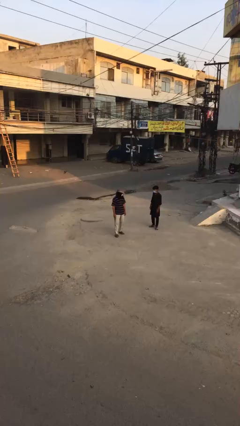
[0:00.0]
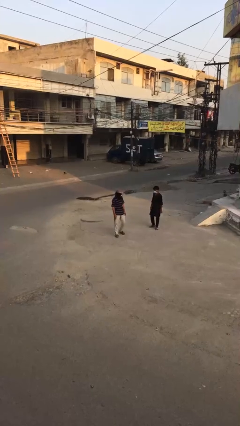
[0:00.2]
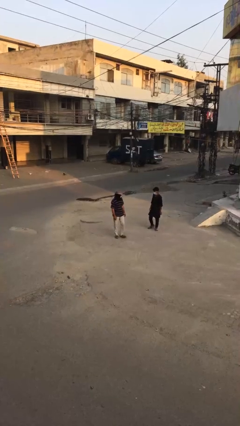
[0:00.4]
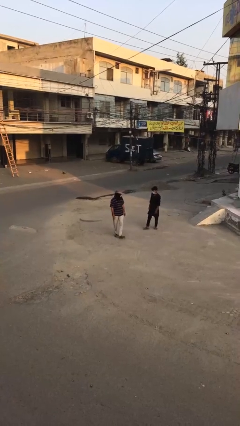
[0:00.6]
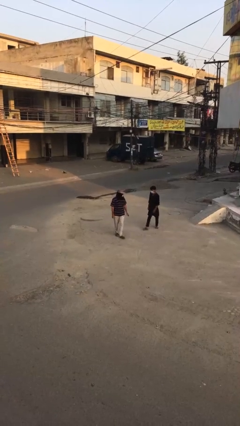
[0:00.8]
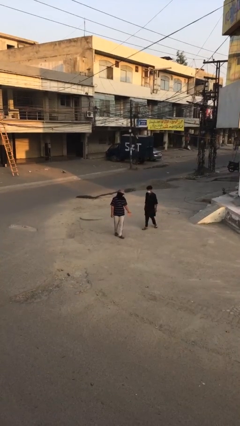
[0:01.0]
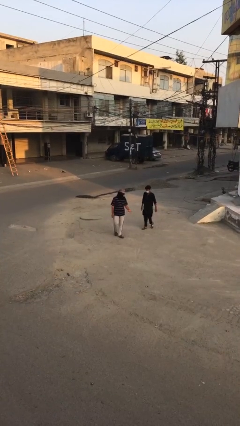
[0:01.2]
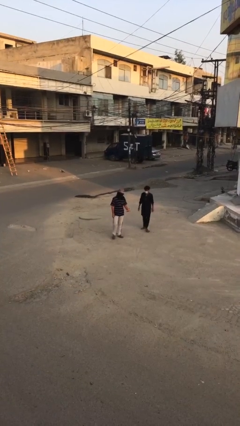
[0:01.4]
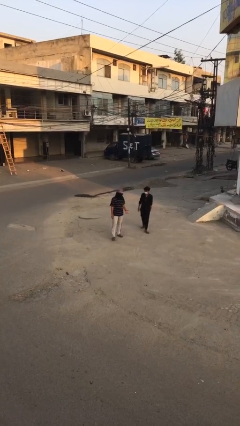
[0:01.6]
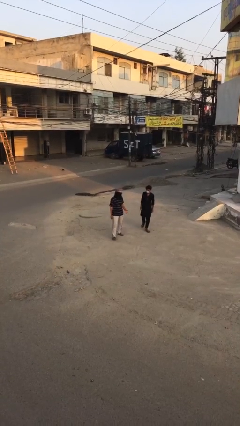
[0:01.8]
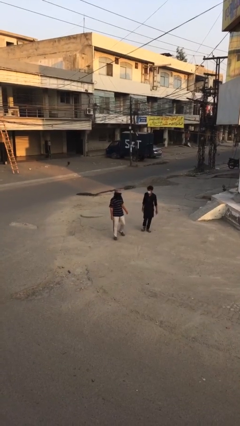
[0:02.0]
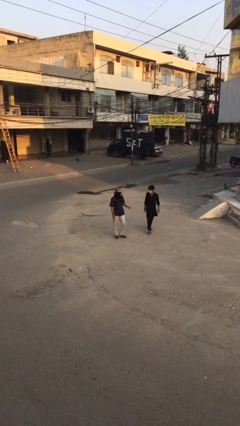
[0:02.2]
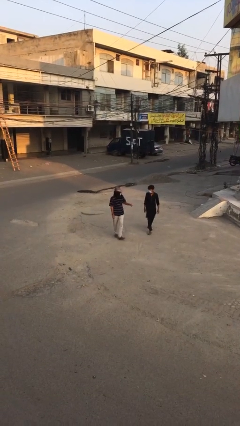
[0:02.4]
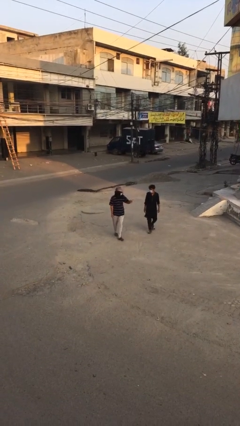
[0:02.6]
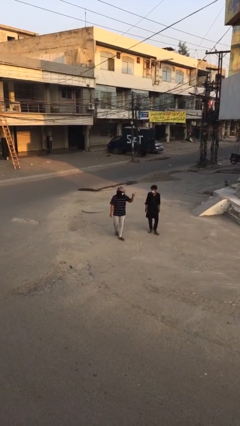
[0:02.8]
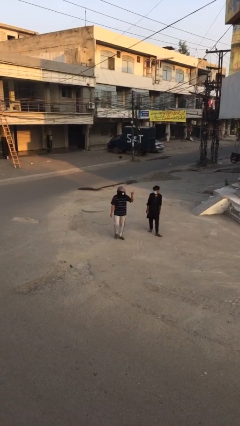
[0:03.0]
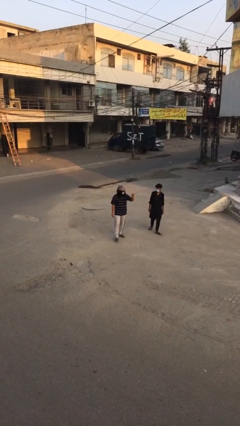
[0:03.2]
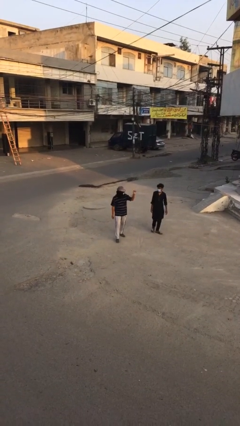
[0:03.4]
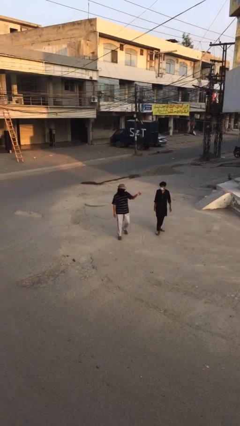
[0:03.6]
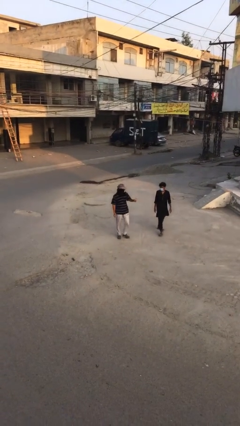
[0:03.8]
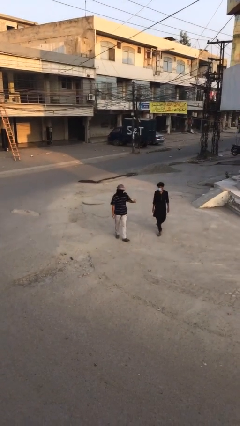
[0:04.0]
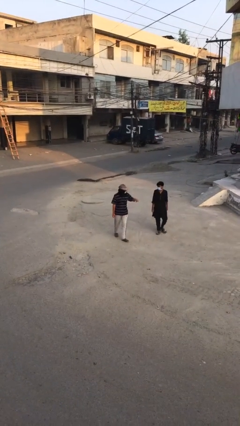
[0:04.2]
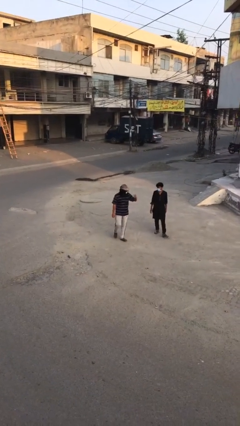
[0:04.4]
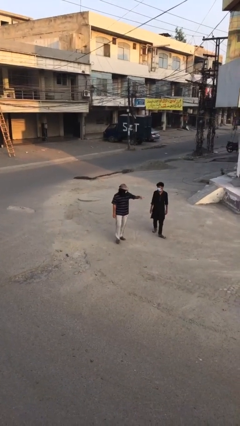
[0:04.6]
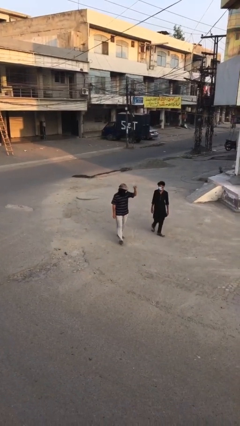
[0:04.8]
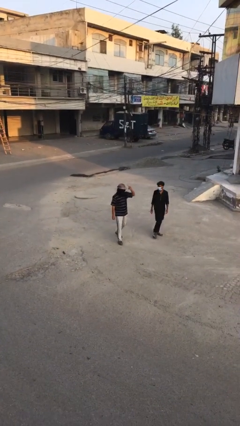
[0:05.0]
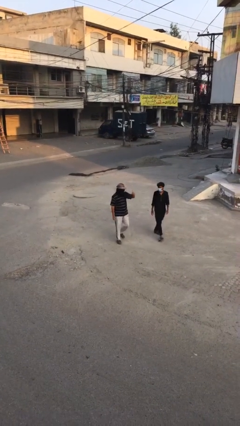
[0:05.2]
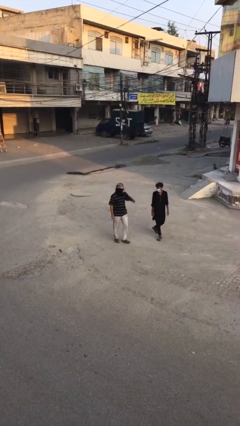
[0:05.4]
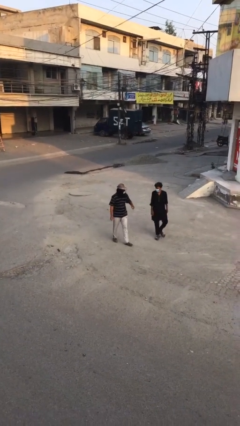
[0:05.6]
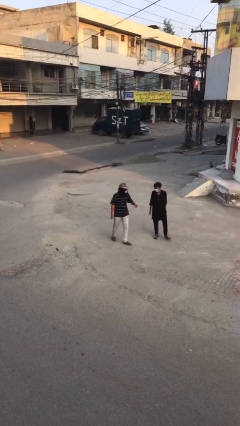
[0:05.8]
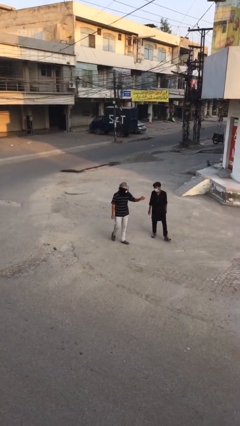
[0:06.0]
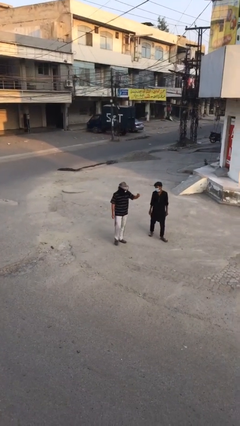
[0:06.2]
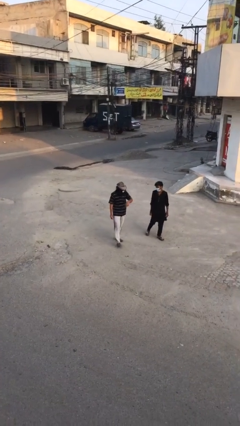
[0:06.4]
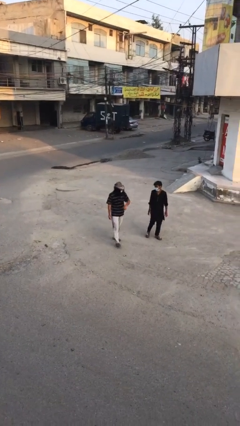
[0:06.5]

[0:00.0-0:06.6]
person talks to person

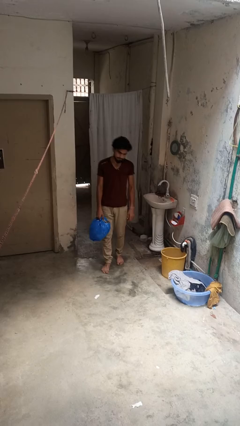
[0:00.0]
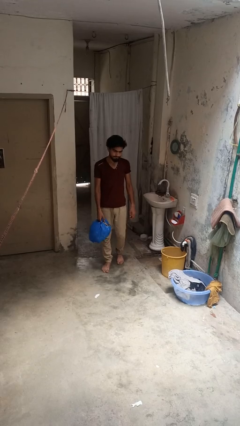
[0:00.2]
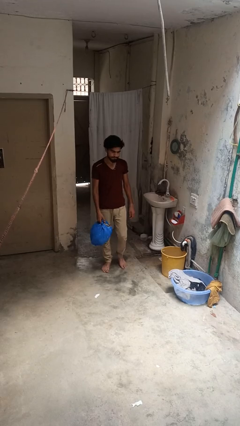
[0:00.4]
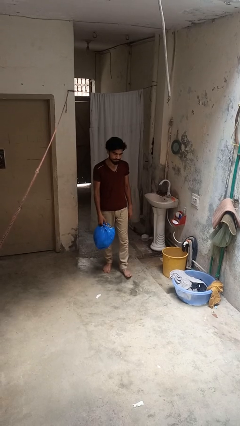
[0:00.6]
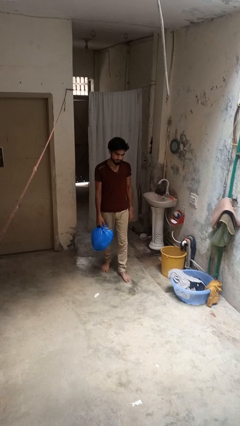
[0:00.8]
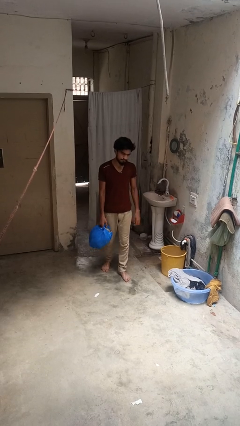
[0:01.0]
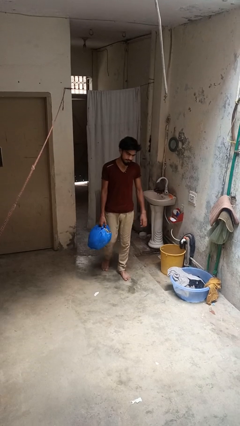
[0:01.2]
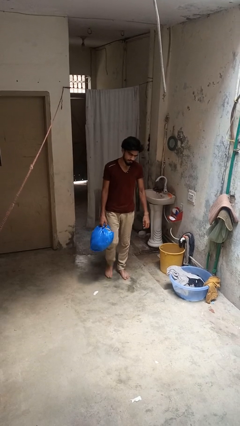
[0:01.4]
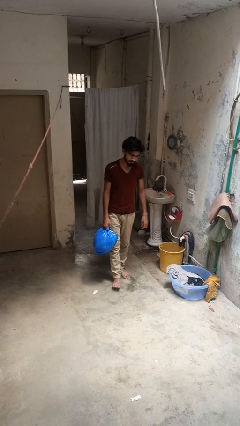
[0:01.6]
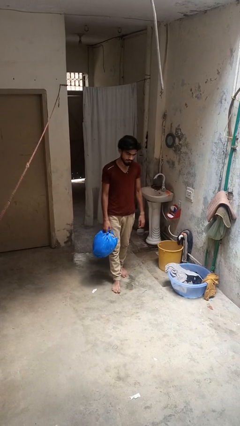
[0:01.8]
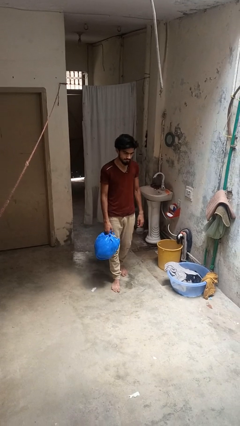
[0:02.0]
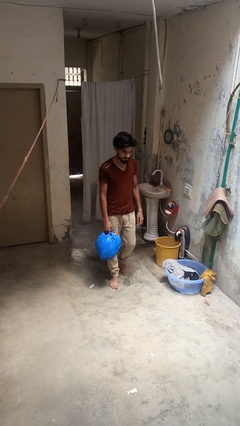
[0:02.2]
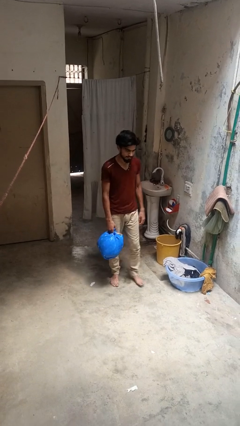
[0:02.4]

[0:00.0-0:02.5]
person carries groceries

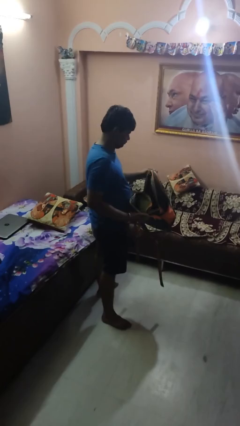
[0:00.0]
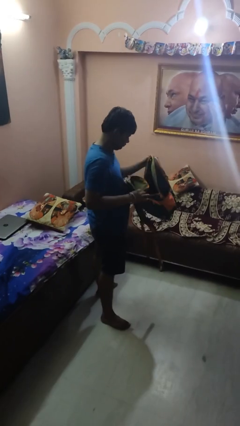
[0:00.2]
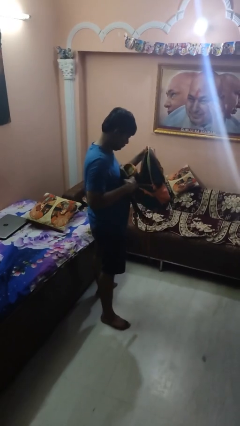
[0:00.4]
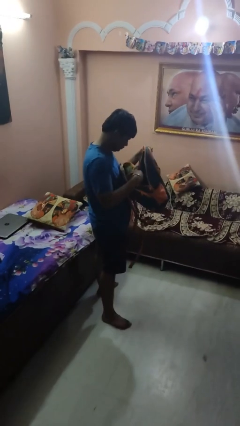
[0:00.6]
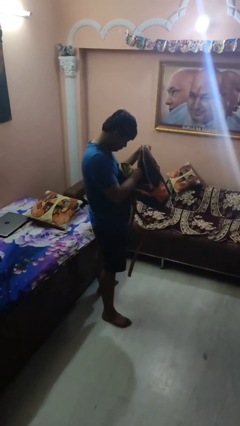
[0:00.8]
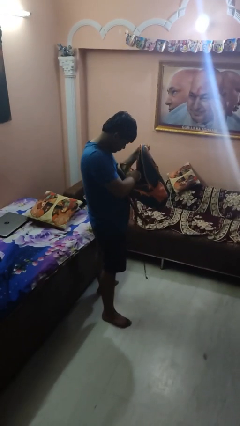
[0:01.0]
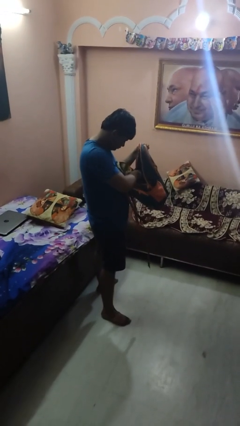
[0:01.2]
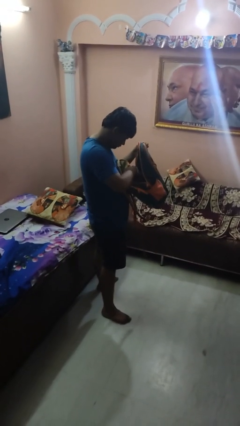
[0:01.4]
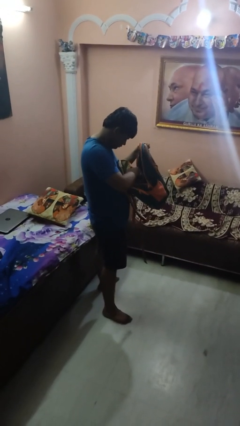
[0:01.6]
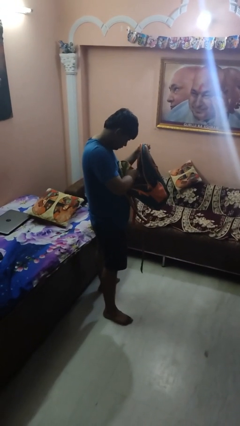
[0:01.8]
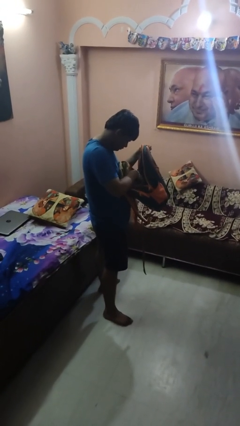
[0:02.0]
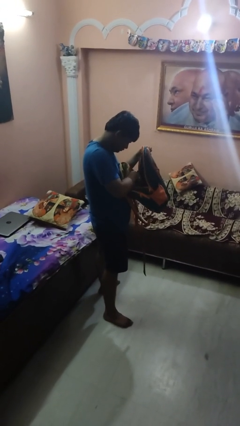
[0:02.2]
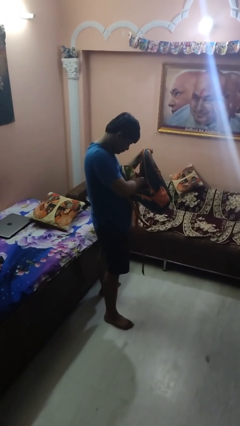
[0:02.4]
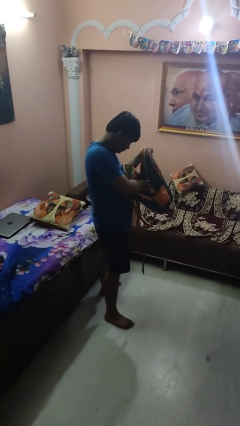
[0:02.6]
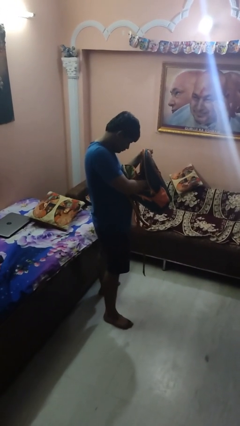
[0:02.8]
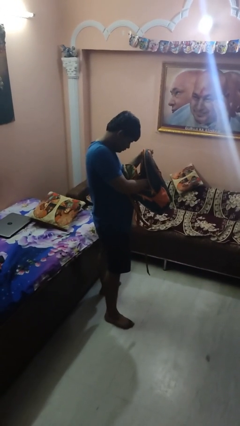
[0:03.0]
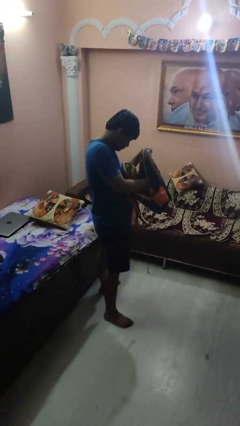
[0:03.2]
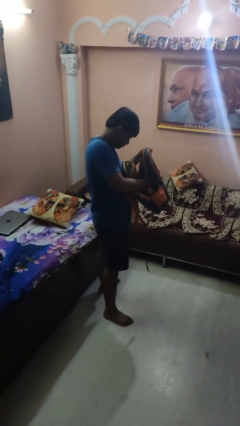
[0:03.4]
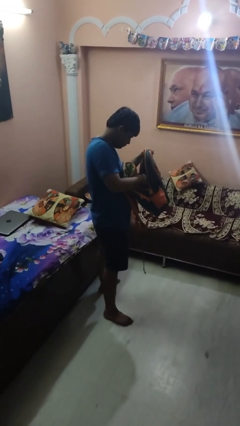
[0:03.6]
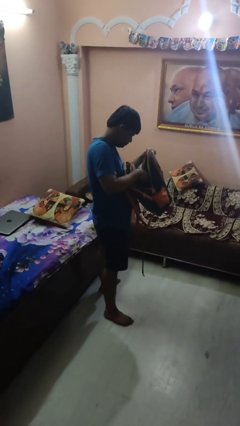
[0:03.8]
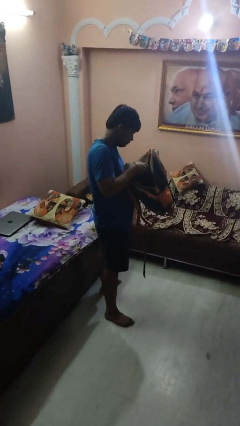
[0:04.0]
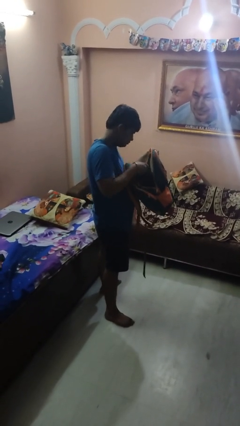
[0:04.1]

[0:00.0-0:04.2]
person searches in backpack

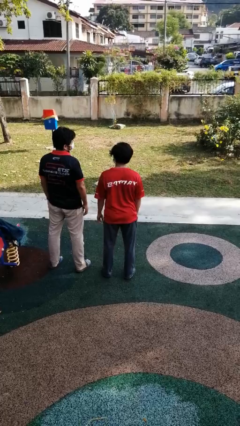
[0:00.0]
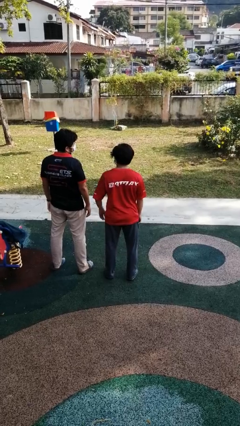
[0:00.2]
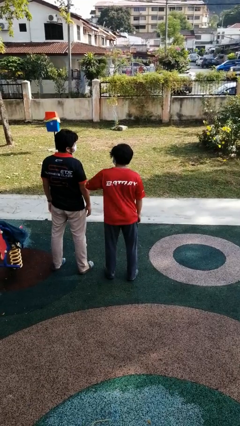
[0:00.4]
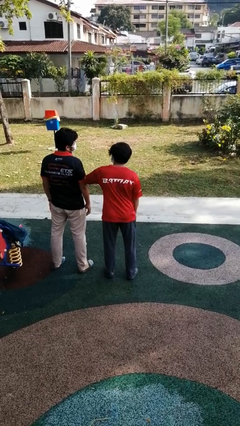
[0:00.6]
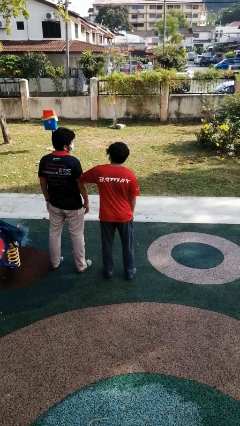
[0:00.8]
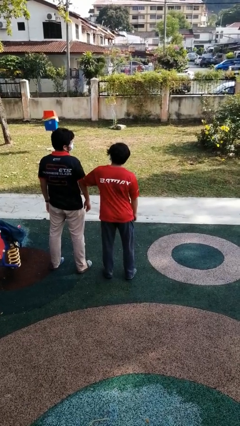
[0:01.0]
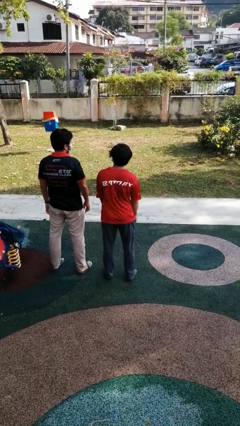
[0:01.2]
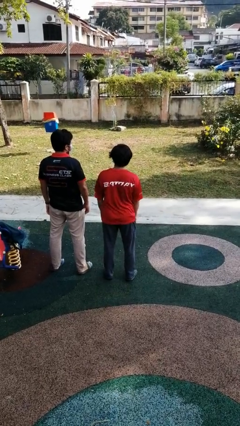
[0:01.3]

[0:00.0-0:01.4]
person nudges person with elbow

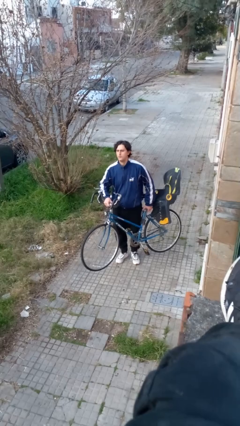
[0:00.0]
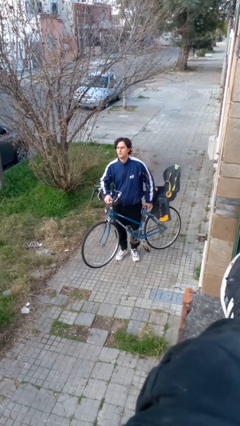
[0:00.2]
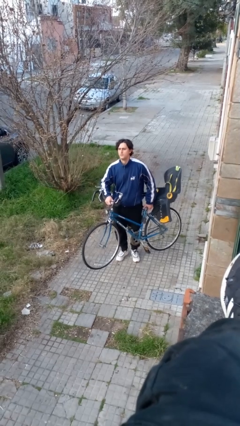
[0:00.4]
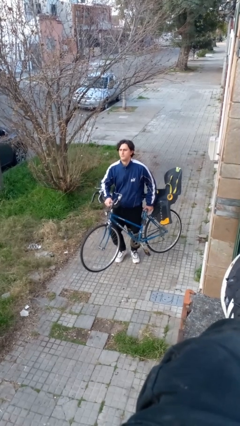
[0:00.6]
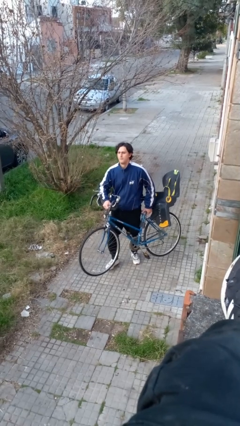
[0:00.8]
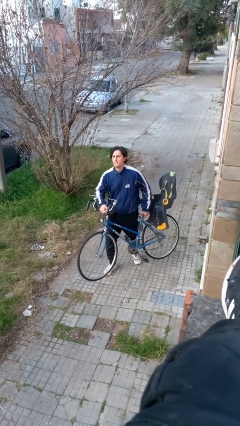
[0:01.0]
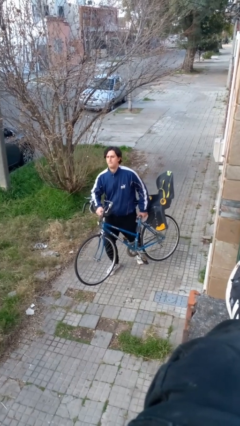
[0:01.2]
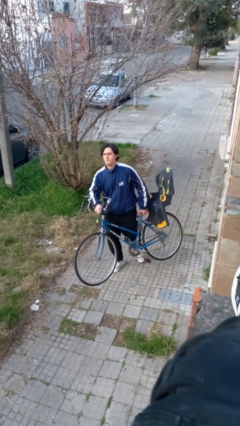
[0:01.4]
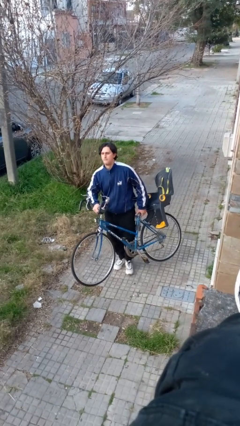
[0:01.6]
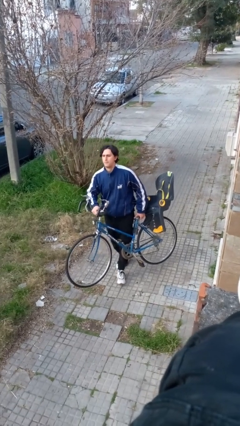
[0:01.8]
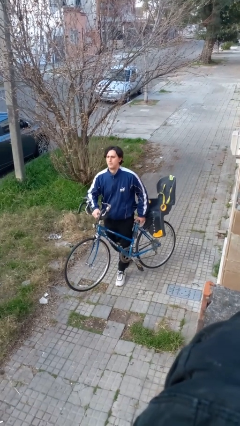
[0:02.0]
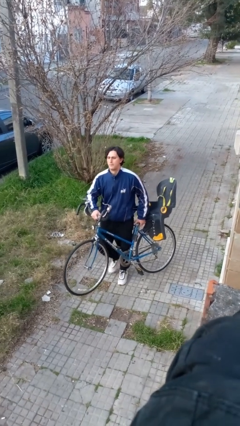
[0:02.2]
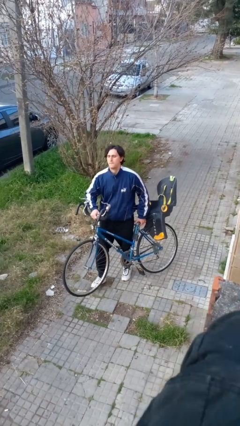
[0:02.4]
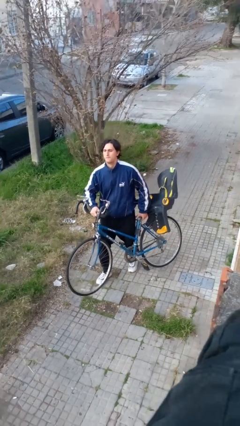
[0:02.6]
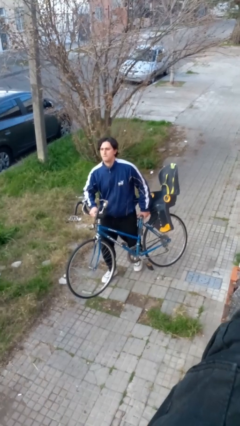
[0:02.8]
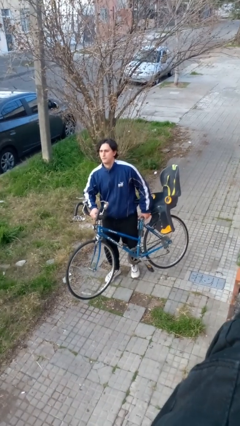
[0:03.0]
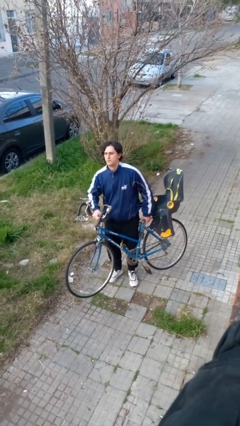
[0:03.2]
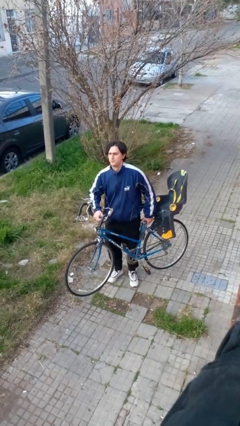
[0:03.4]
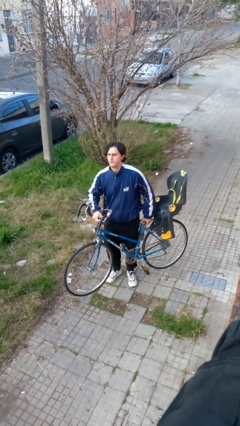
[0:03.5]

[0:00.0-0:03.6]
person carries bicycle
